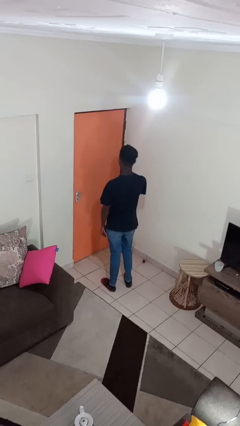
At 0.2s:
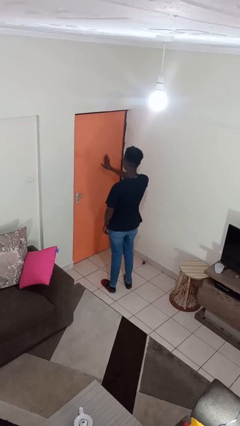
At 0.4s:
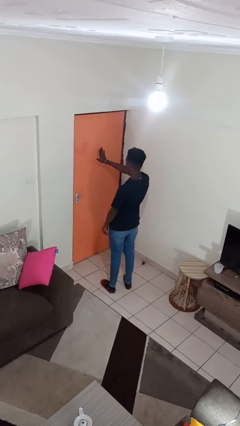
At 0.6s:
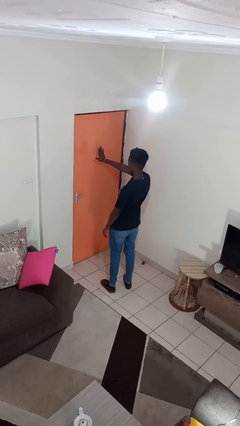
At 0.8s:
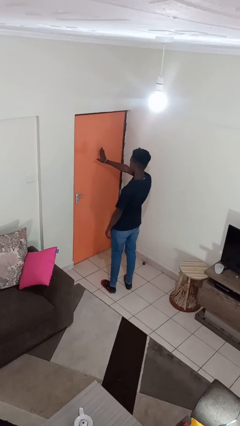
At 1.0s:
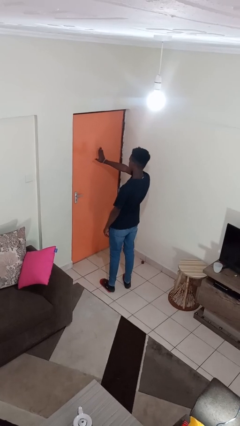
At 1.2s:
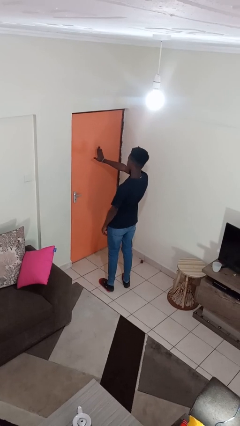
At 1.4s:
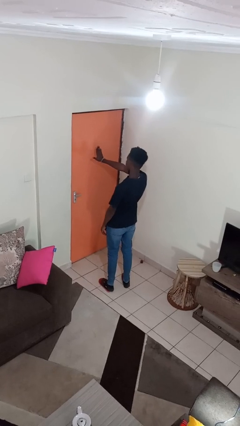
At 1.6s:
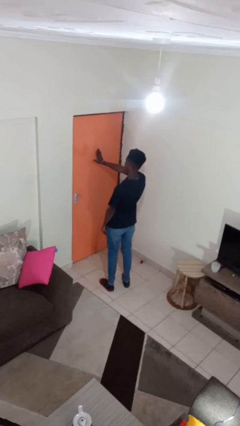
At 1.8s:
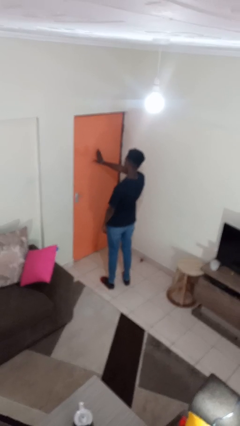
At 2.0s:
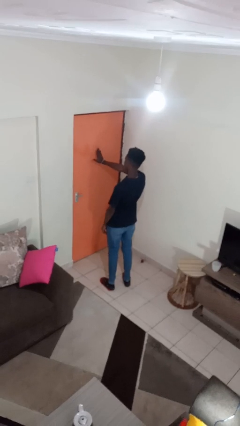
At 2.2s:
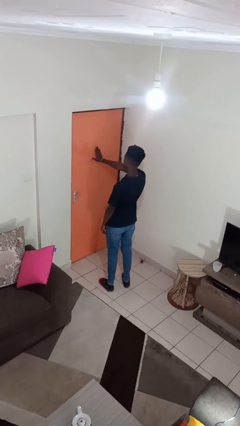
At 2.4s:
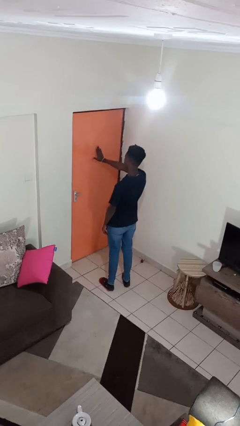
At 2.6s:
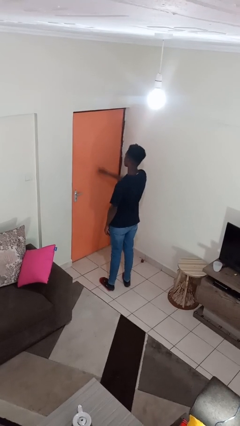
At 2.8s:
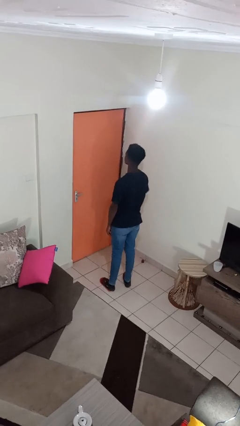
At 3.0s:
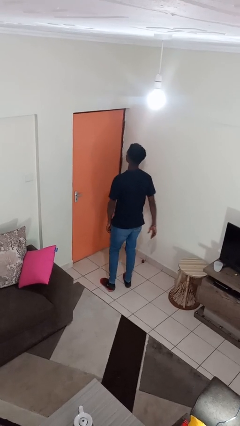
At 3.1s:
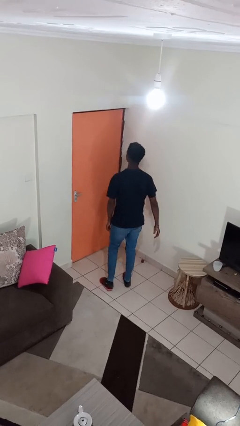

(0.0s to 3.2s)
person gestures stop

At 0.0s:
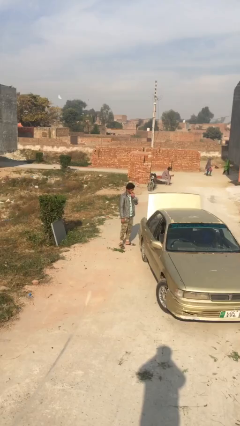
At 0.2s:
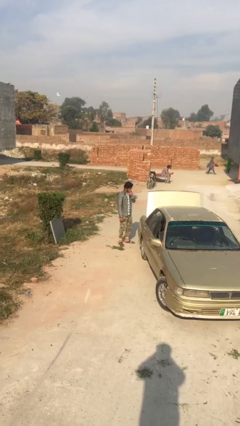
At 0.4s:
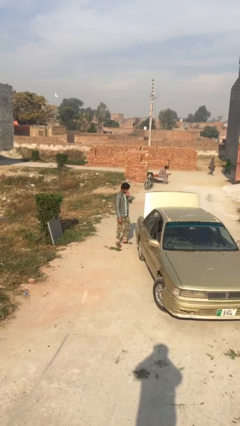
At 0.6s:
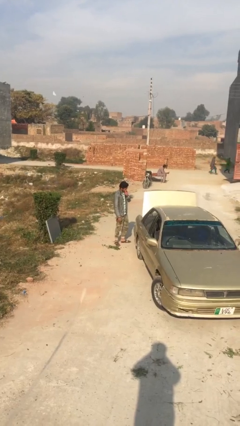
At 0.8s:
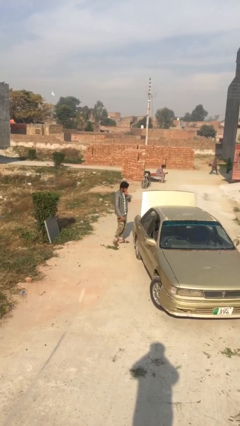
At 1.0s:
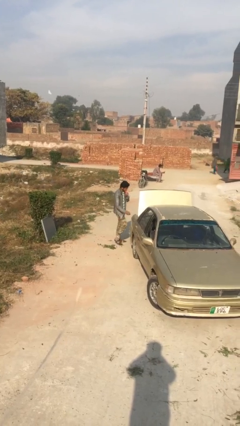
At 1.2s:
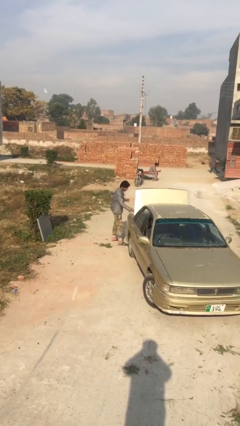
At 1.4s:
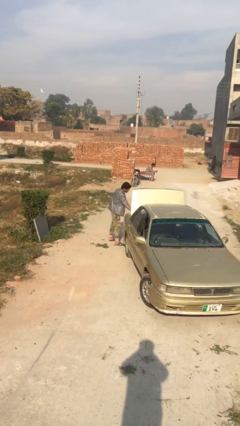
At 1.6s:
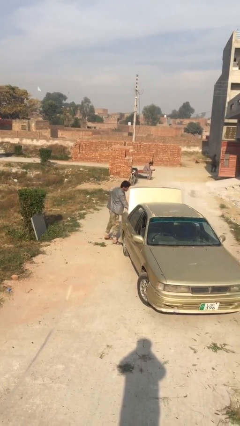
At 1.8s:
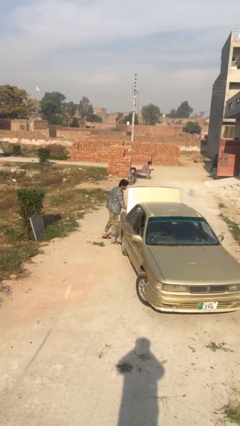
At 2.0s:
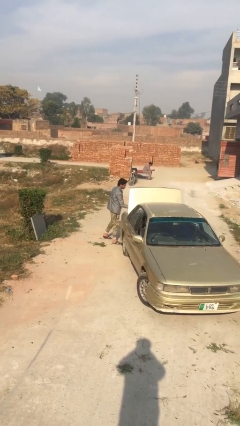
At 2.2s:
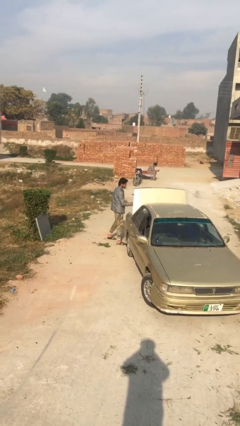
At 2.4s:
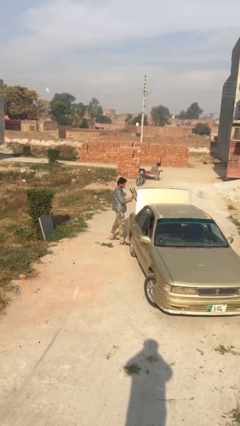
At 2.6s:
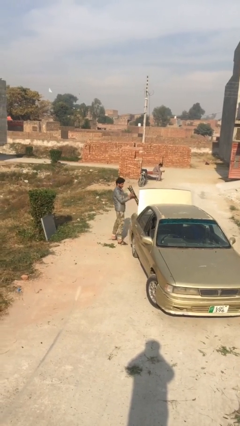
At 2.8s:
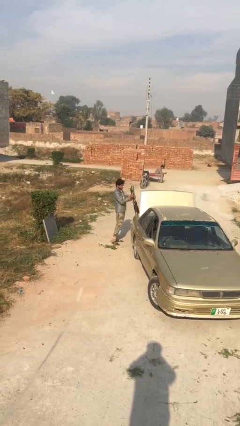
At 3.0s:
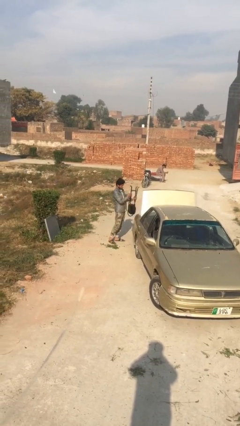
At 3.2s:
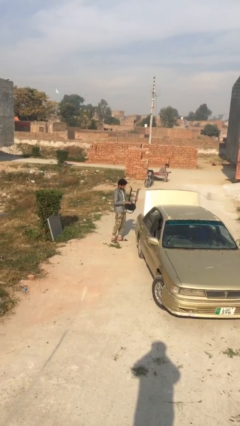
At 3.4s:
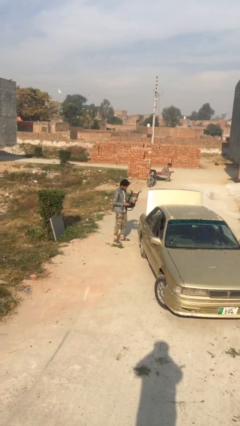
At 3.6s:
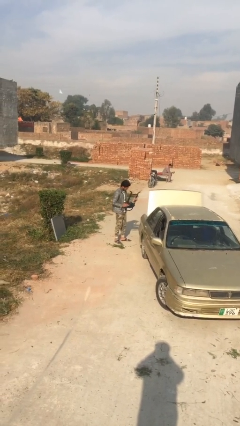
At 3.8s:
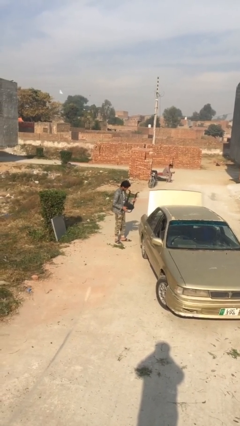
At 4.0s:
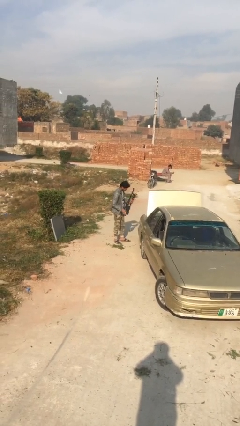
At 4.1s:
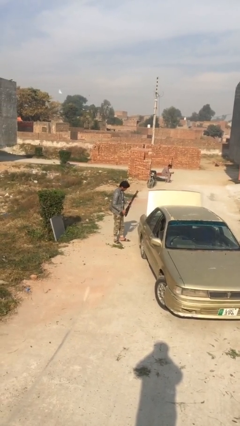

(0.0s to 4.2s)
person unloads car

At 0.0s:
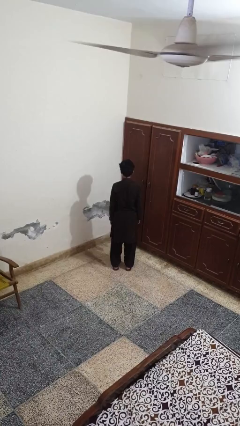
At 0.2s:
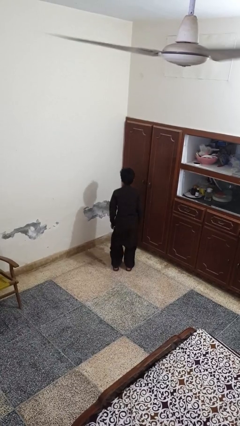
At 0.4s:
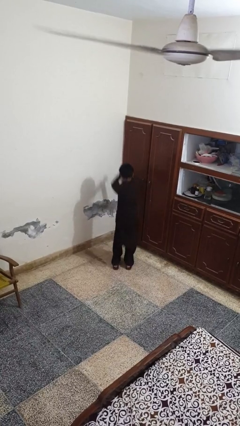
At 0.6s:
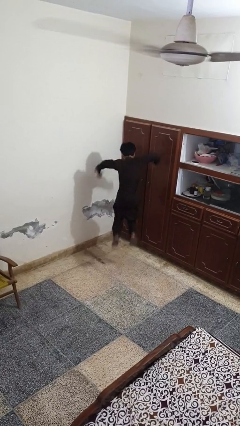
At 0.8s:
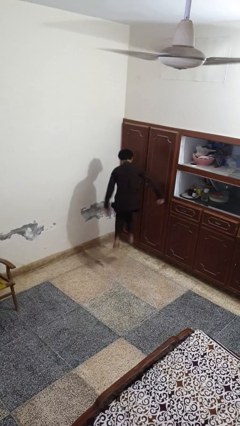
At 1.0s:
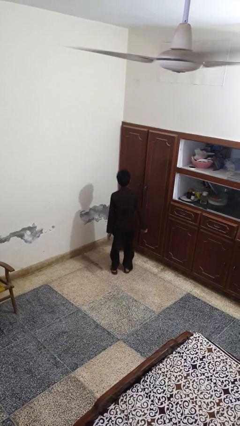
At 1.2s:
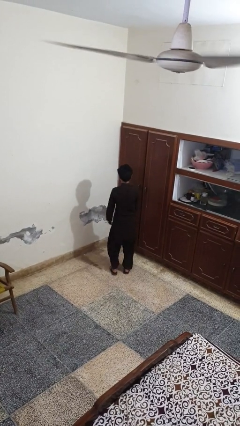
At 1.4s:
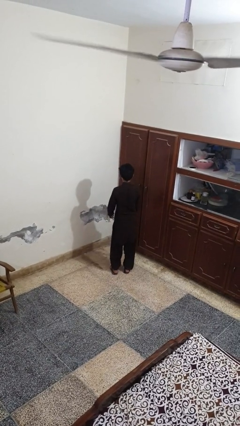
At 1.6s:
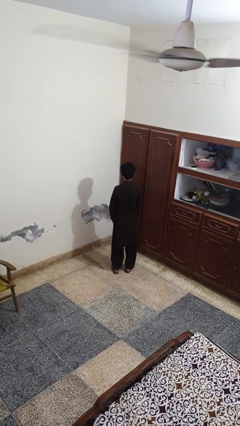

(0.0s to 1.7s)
person jumps

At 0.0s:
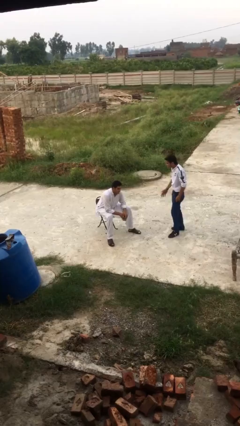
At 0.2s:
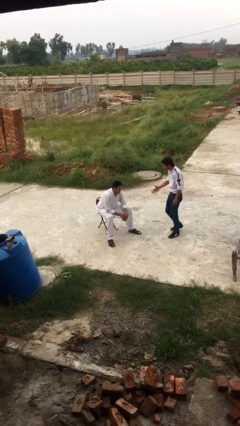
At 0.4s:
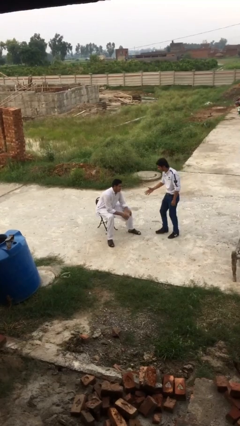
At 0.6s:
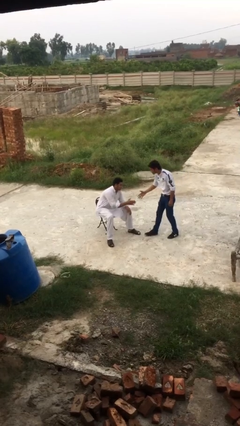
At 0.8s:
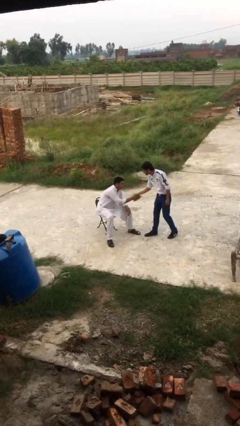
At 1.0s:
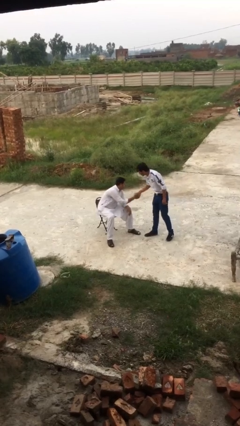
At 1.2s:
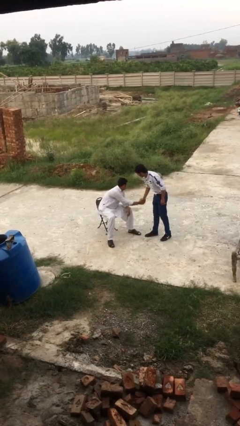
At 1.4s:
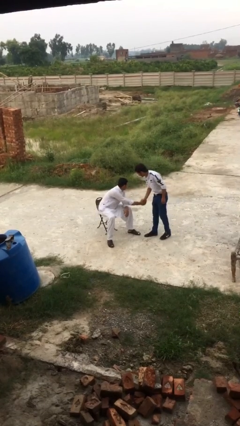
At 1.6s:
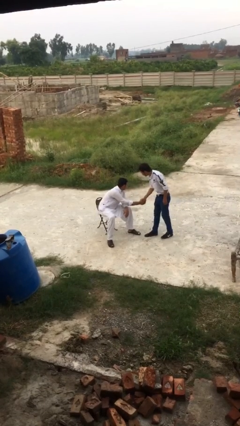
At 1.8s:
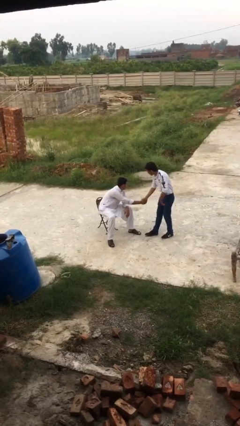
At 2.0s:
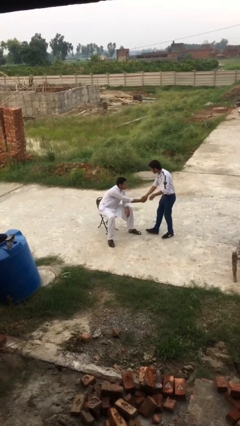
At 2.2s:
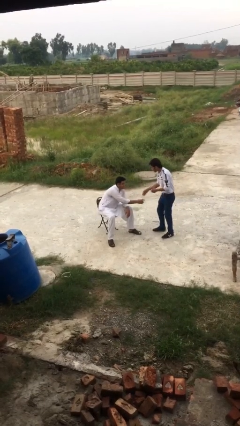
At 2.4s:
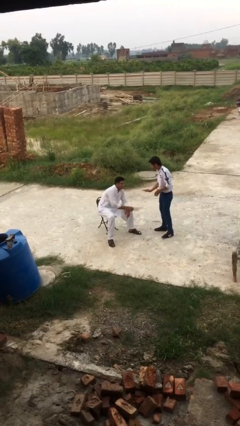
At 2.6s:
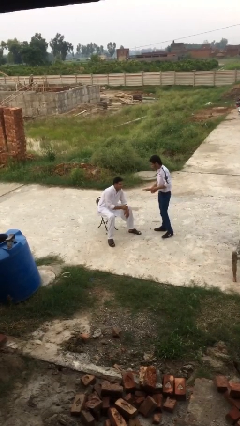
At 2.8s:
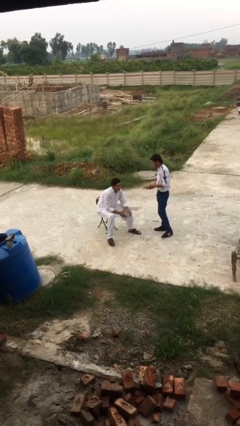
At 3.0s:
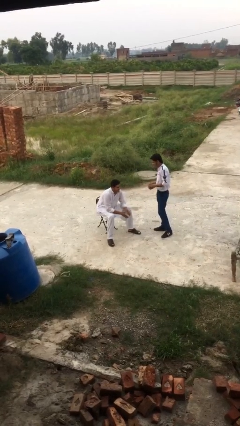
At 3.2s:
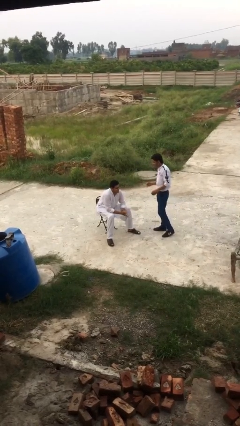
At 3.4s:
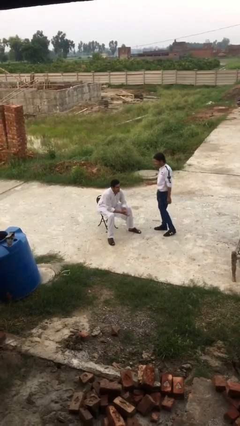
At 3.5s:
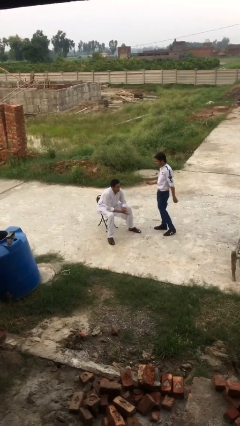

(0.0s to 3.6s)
person shakes hand

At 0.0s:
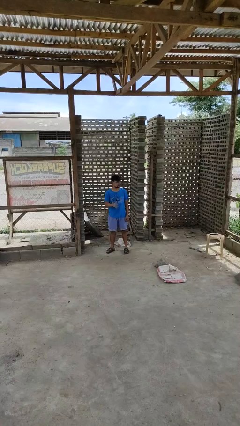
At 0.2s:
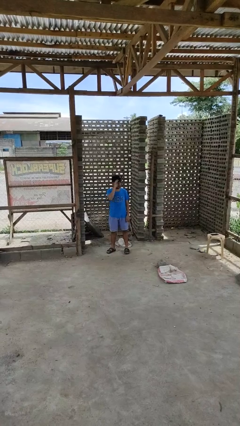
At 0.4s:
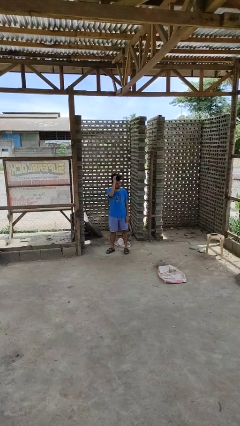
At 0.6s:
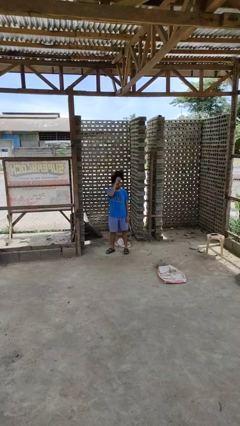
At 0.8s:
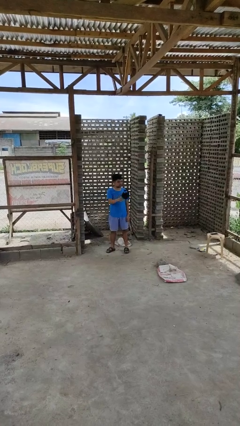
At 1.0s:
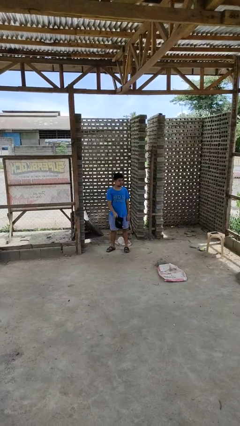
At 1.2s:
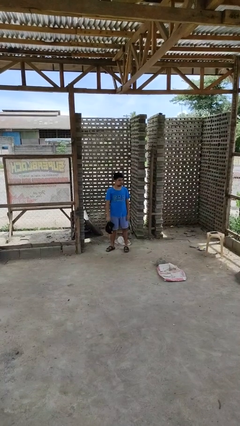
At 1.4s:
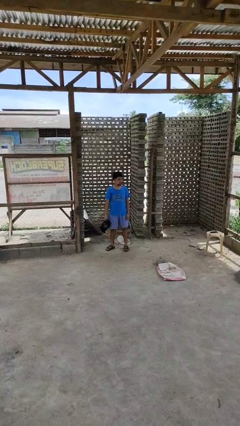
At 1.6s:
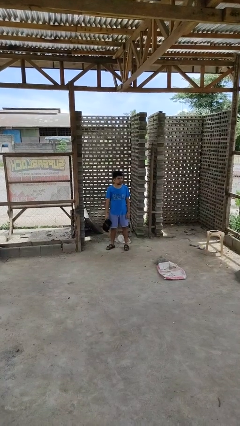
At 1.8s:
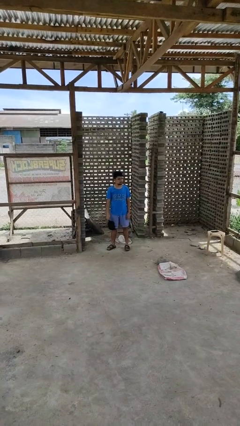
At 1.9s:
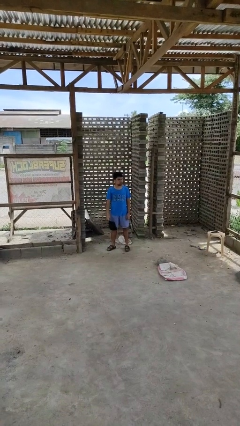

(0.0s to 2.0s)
person takes off hat

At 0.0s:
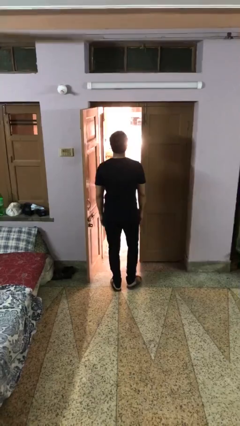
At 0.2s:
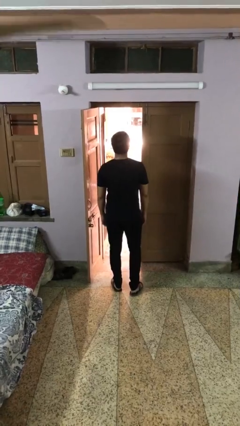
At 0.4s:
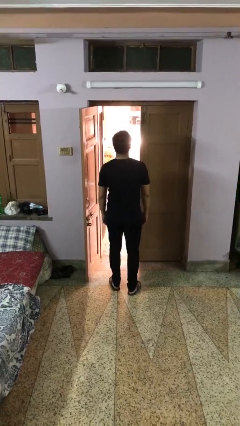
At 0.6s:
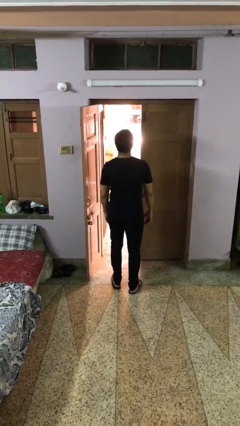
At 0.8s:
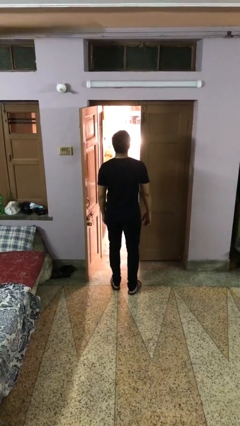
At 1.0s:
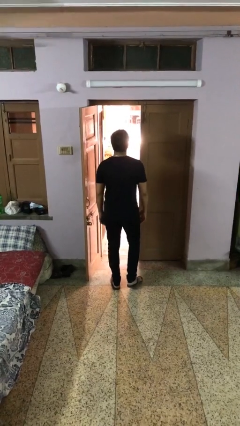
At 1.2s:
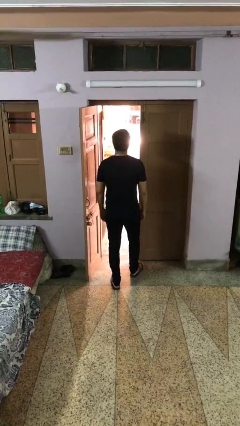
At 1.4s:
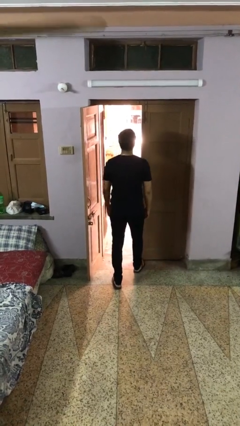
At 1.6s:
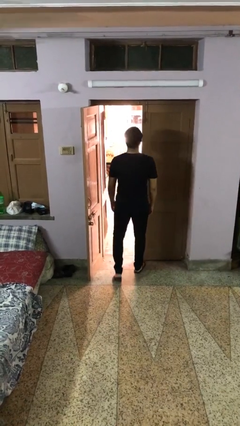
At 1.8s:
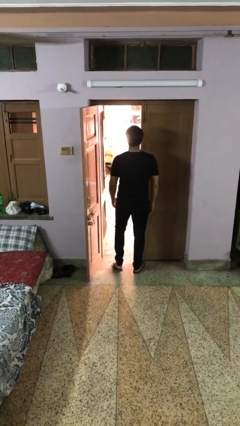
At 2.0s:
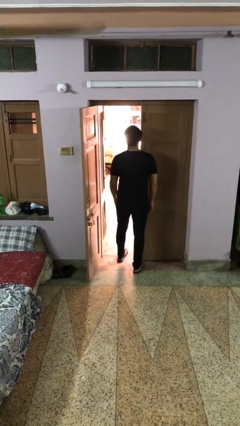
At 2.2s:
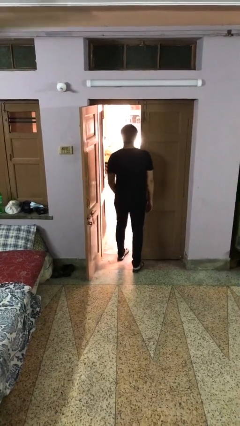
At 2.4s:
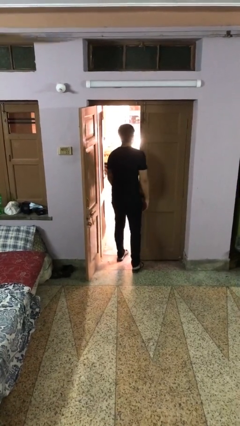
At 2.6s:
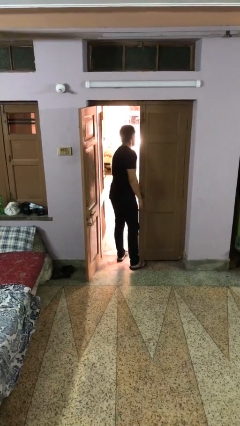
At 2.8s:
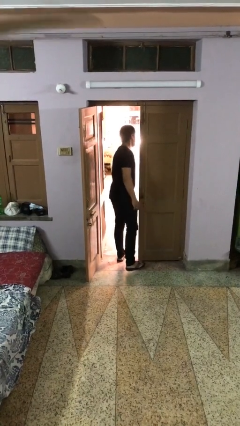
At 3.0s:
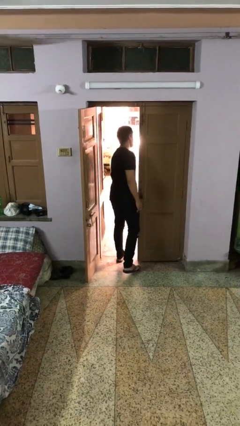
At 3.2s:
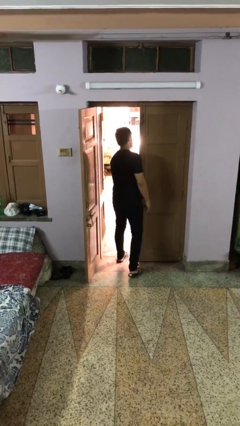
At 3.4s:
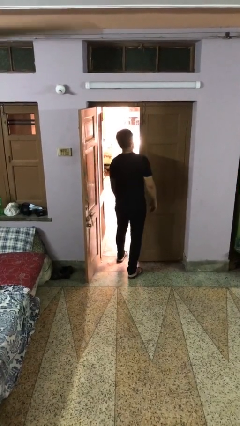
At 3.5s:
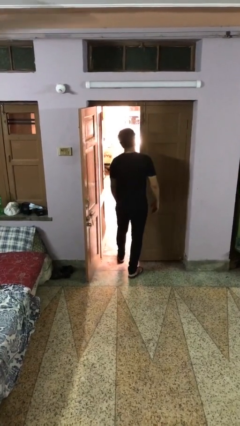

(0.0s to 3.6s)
person bumps into wall
